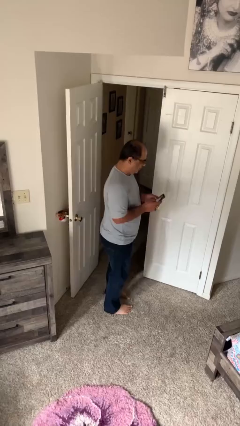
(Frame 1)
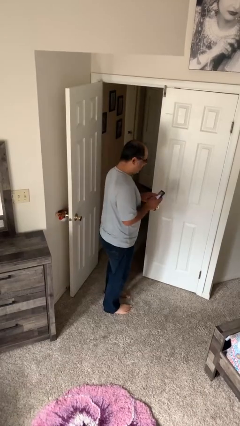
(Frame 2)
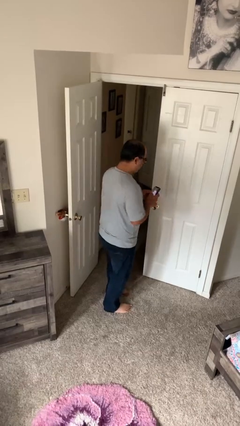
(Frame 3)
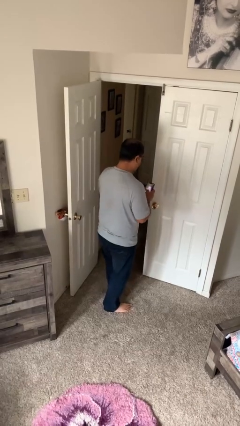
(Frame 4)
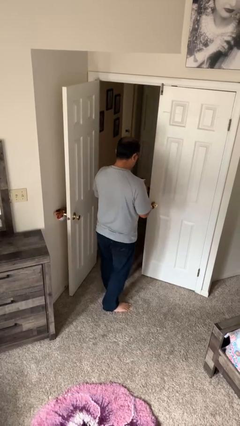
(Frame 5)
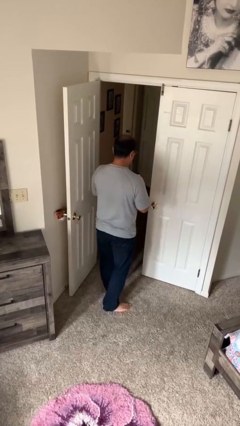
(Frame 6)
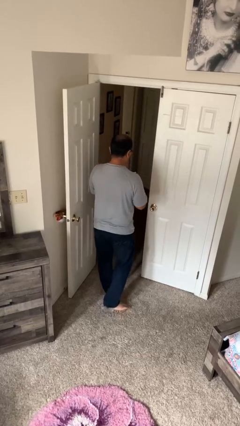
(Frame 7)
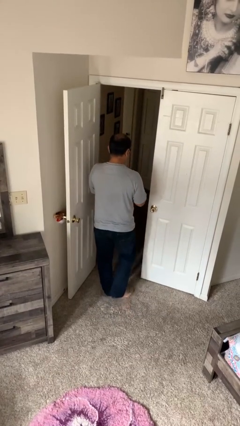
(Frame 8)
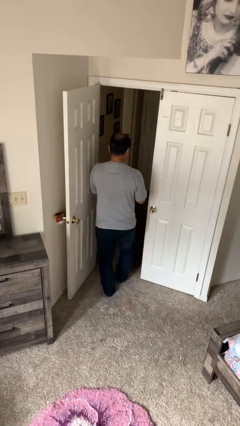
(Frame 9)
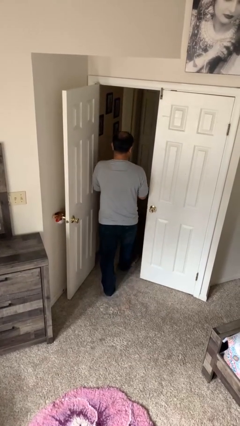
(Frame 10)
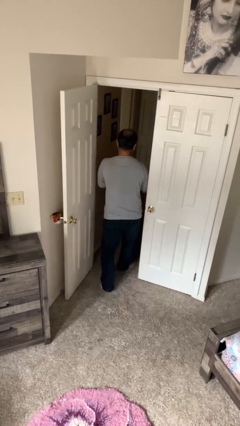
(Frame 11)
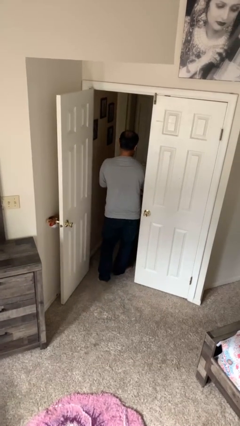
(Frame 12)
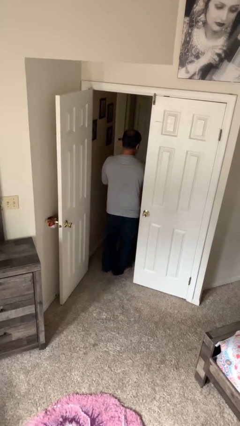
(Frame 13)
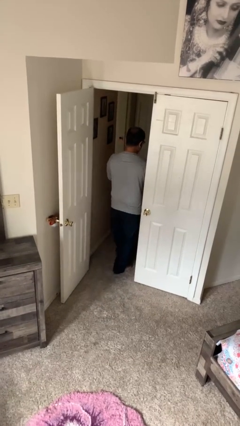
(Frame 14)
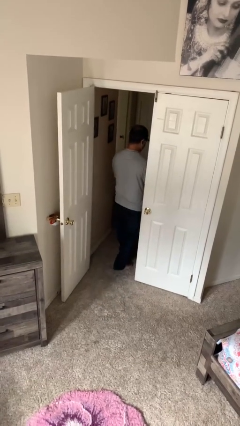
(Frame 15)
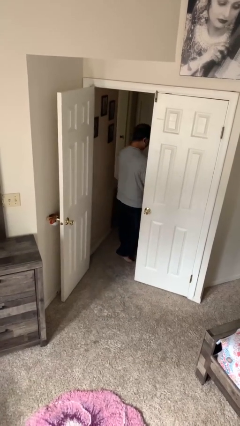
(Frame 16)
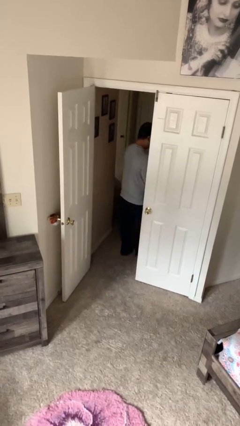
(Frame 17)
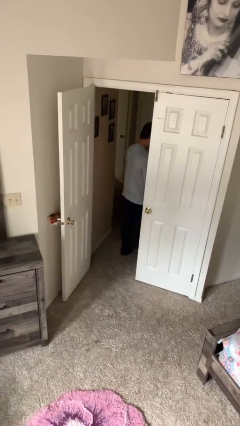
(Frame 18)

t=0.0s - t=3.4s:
person exits scene through structure

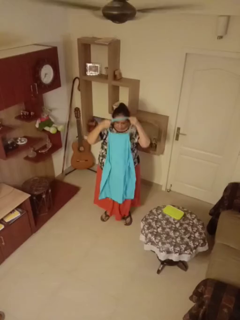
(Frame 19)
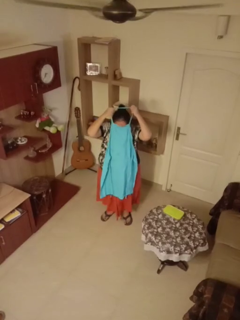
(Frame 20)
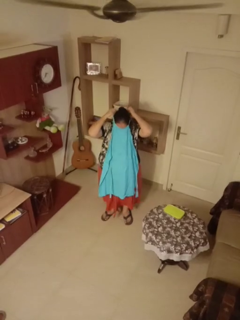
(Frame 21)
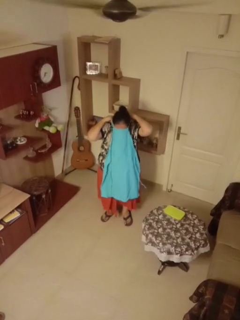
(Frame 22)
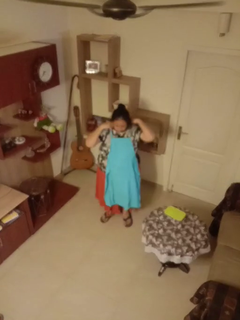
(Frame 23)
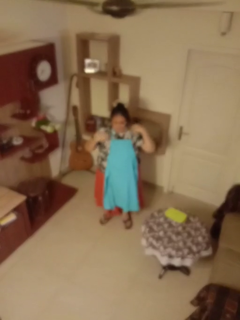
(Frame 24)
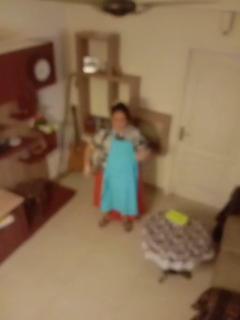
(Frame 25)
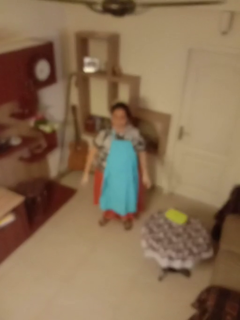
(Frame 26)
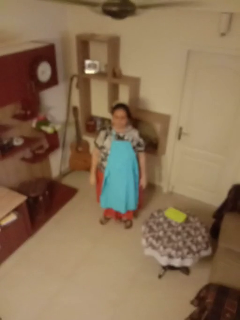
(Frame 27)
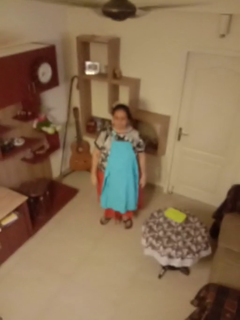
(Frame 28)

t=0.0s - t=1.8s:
person puts on apron

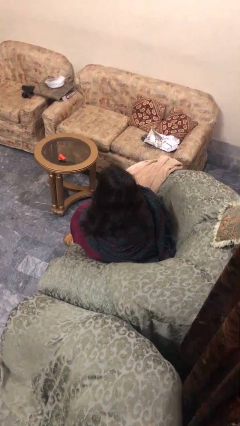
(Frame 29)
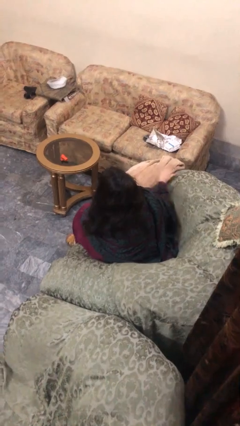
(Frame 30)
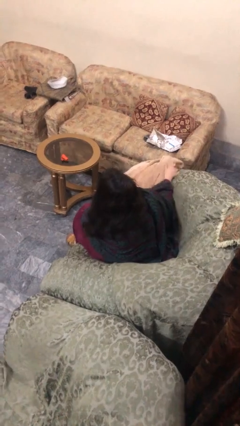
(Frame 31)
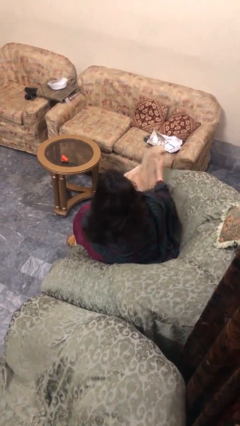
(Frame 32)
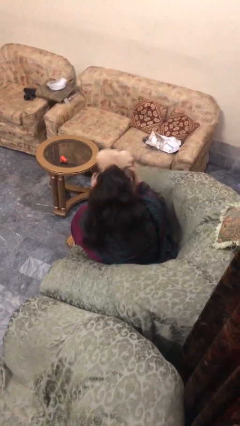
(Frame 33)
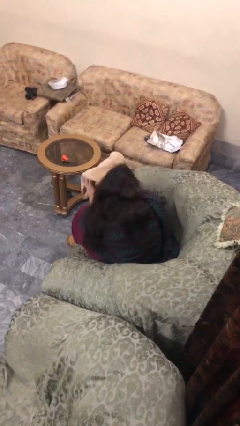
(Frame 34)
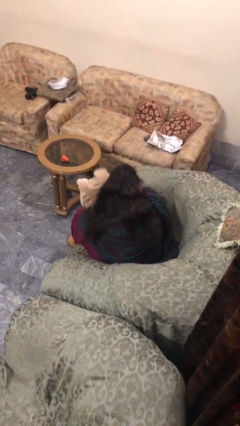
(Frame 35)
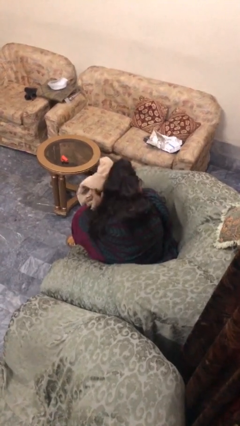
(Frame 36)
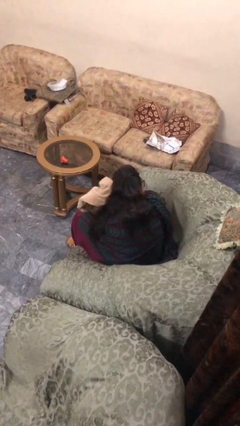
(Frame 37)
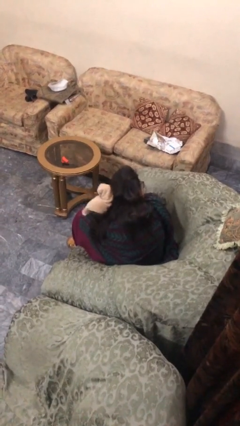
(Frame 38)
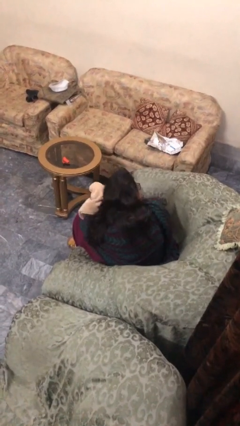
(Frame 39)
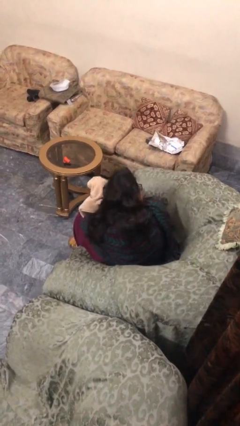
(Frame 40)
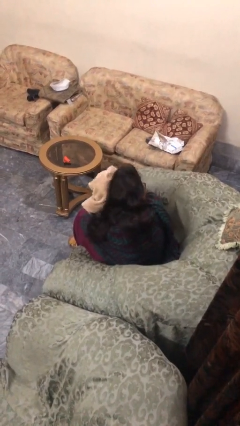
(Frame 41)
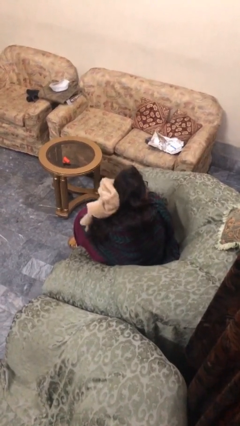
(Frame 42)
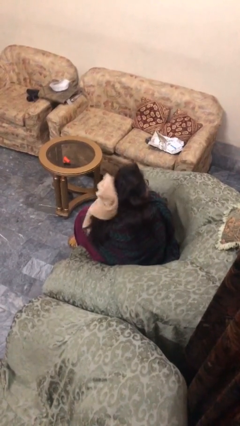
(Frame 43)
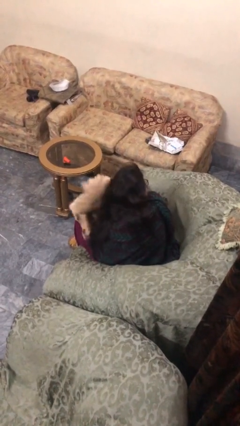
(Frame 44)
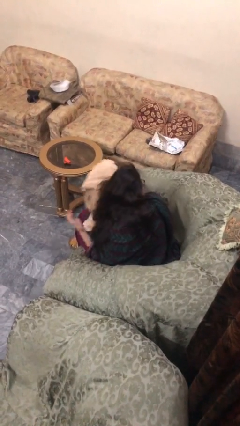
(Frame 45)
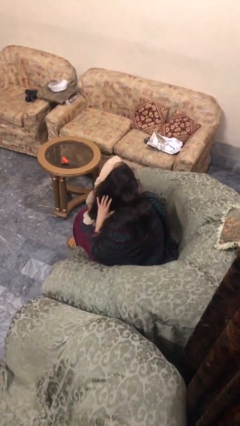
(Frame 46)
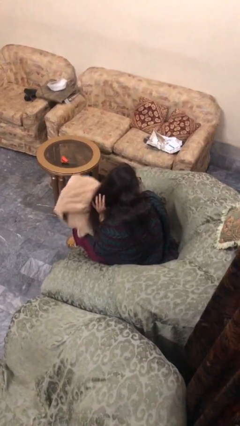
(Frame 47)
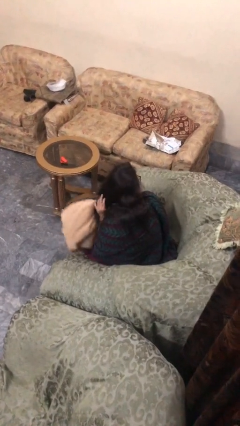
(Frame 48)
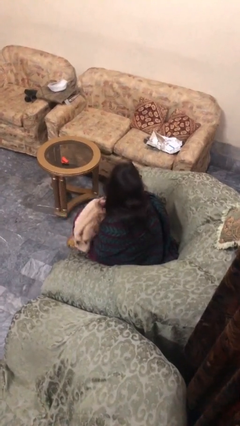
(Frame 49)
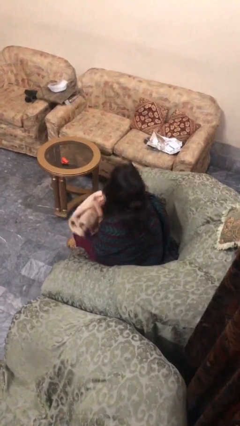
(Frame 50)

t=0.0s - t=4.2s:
person dries hair with towel

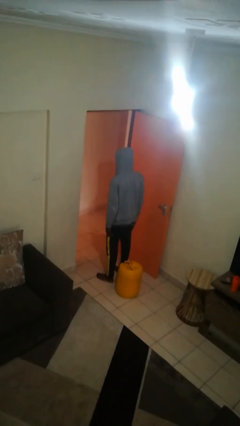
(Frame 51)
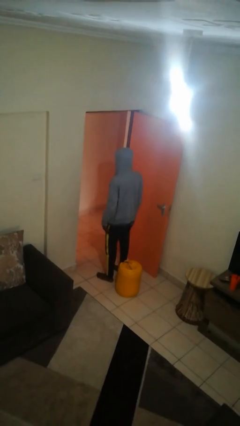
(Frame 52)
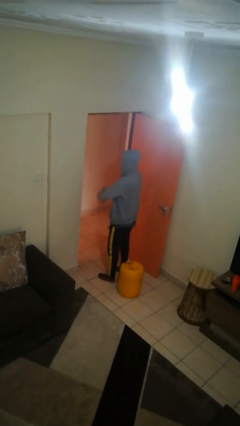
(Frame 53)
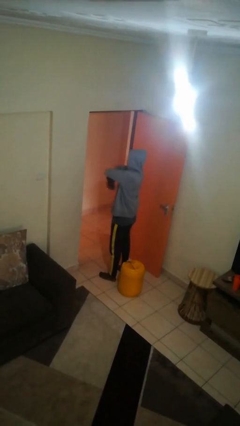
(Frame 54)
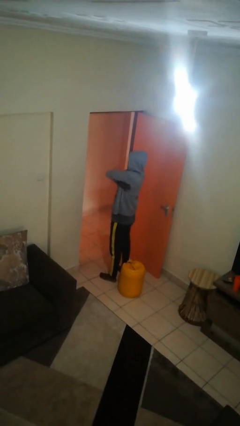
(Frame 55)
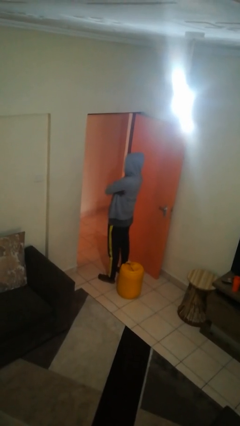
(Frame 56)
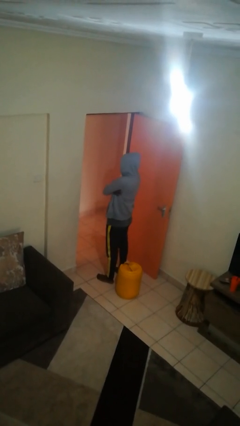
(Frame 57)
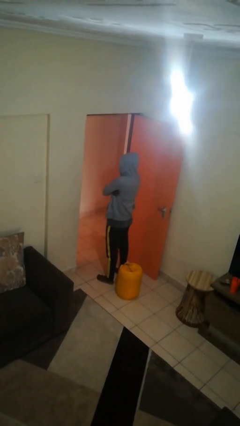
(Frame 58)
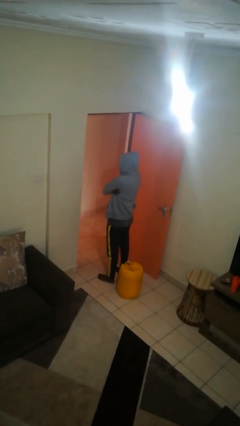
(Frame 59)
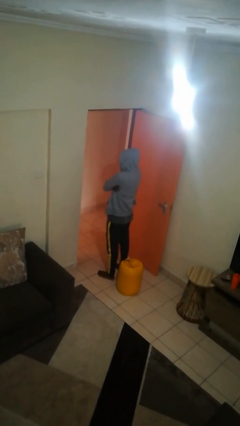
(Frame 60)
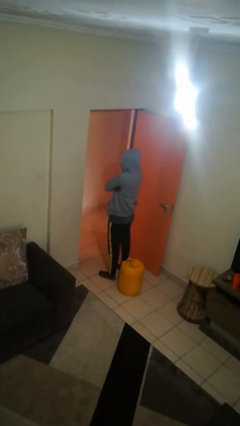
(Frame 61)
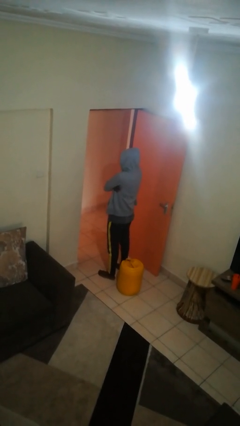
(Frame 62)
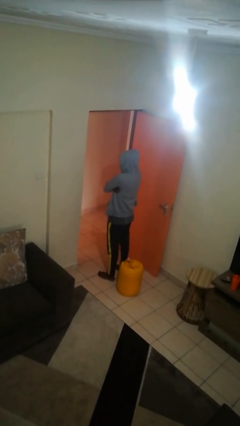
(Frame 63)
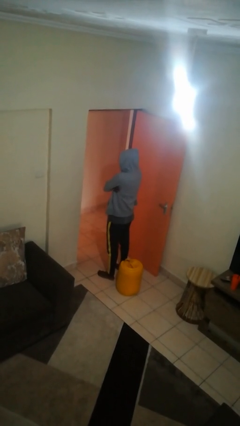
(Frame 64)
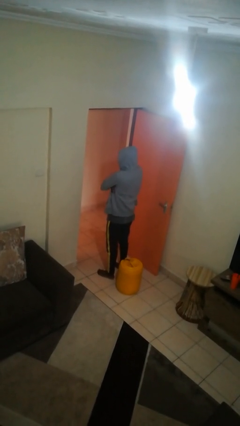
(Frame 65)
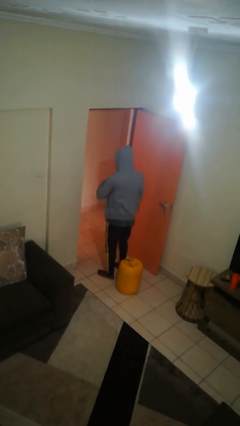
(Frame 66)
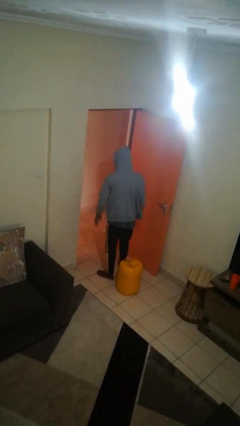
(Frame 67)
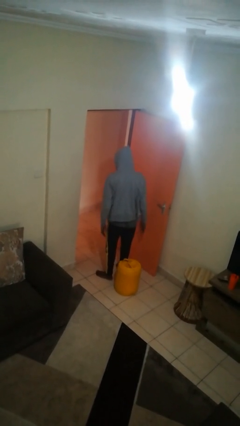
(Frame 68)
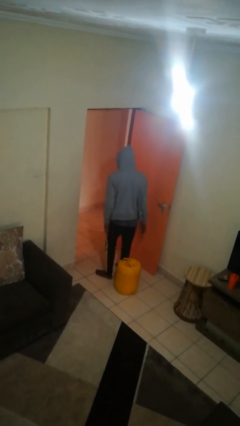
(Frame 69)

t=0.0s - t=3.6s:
person crosses arms

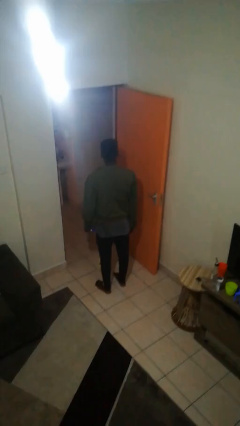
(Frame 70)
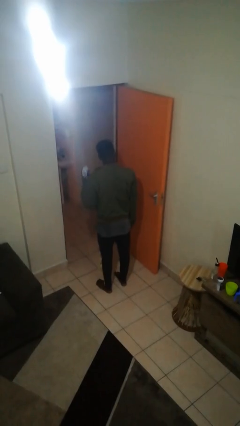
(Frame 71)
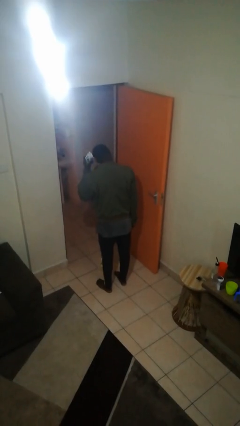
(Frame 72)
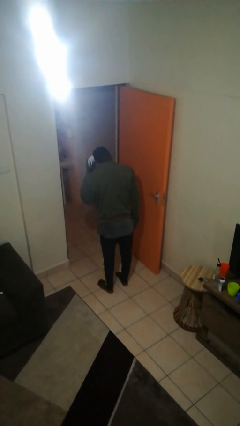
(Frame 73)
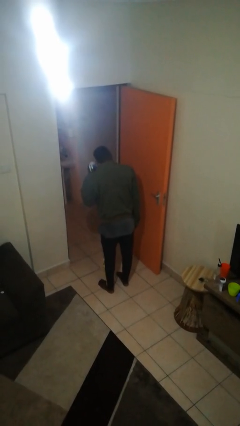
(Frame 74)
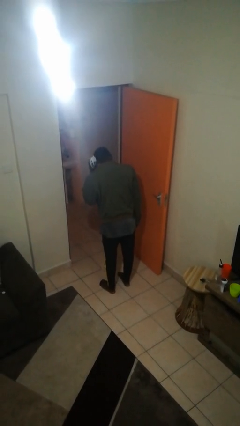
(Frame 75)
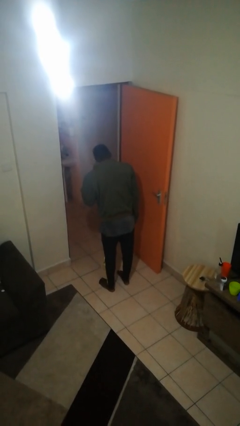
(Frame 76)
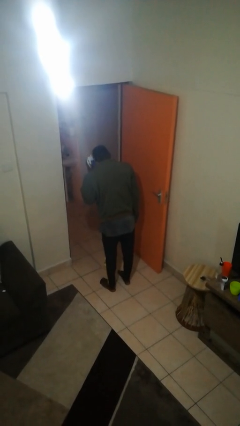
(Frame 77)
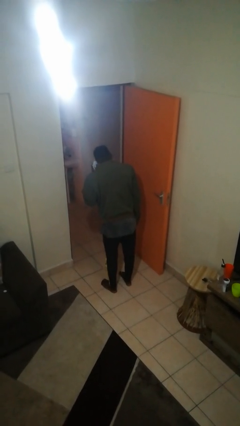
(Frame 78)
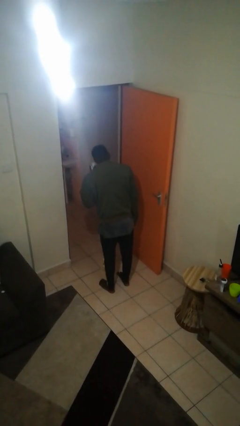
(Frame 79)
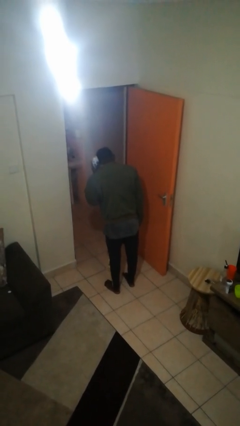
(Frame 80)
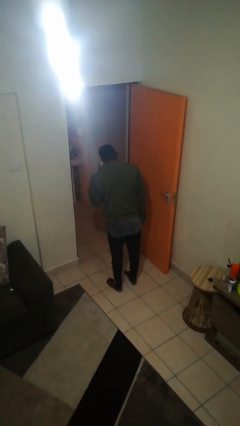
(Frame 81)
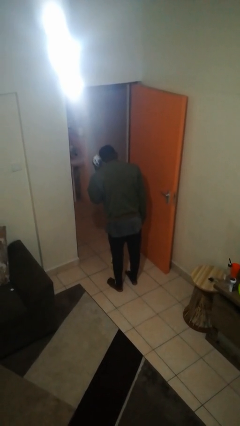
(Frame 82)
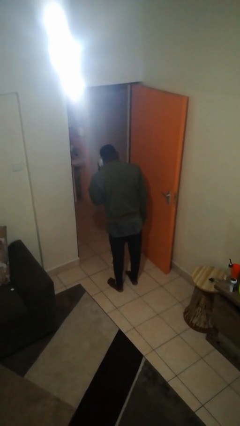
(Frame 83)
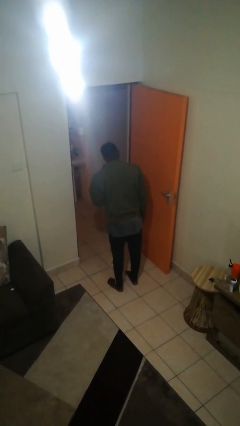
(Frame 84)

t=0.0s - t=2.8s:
person brushes hair

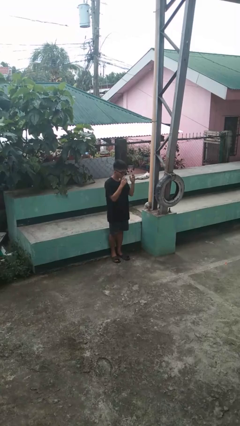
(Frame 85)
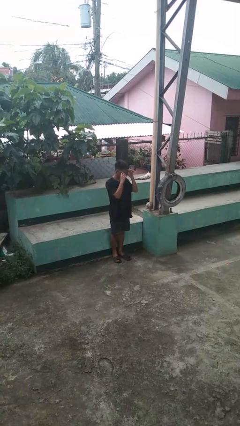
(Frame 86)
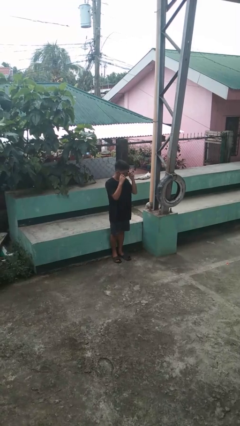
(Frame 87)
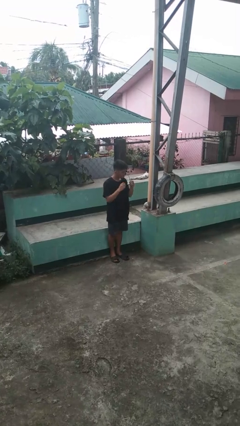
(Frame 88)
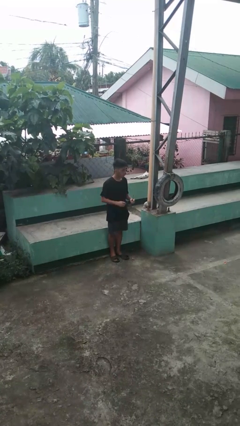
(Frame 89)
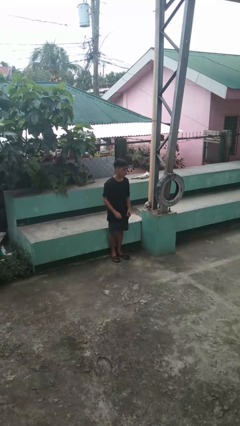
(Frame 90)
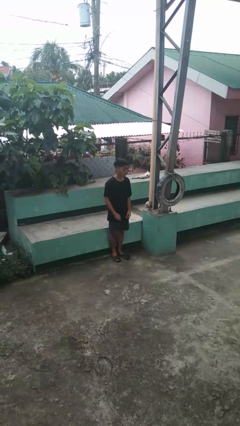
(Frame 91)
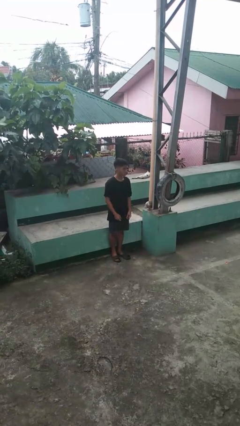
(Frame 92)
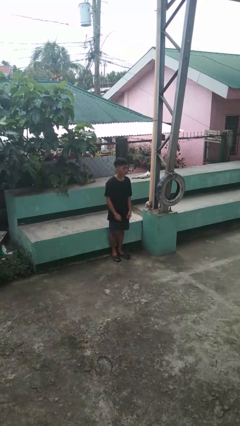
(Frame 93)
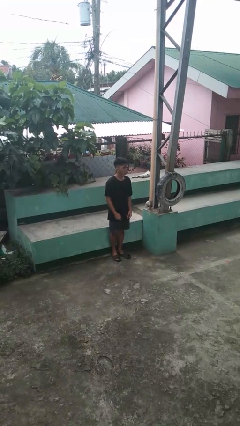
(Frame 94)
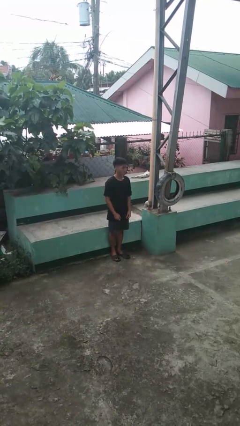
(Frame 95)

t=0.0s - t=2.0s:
person takes off sunglasses
